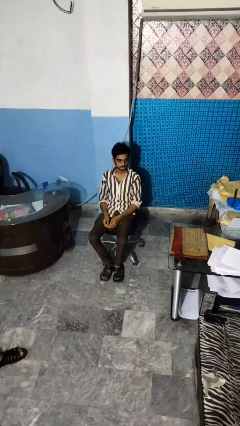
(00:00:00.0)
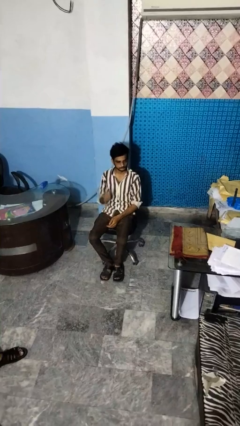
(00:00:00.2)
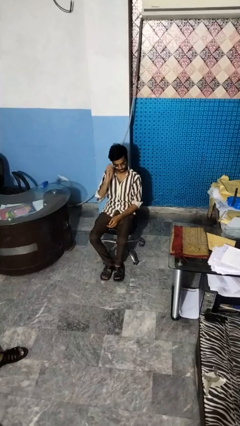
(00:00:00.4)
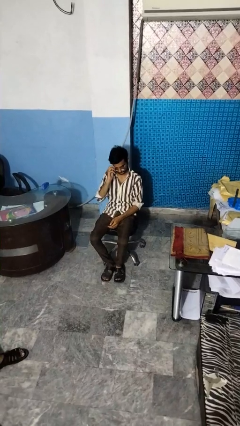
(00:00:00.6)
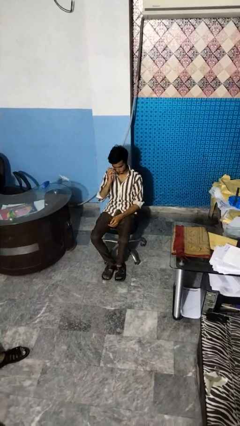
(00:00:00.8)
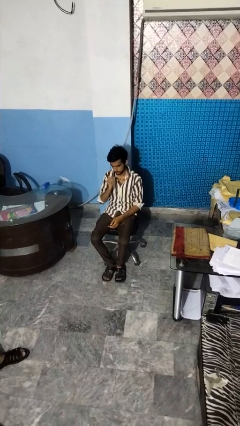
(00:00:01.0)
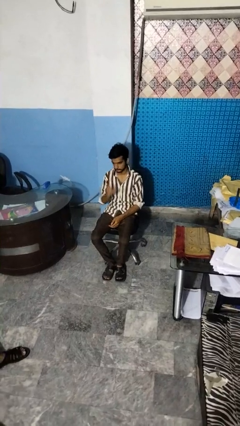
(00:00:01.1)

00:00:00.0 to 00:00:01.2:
person takes off glasses

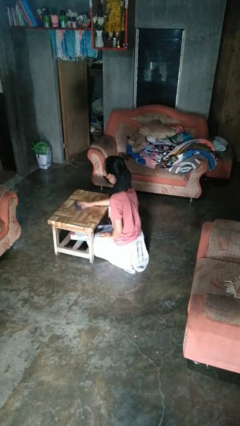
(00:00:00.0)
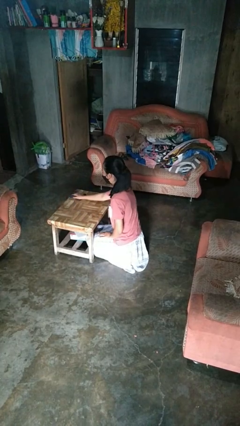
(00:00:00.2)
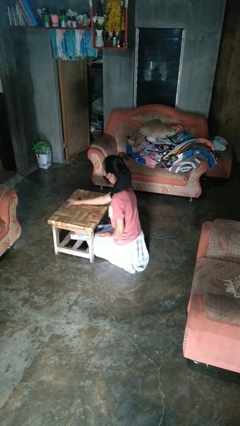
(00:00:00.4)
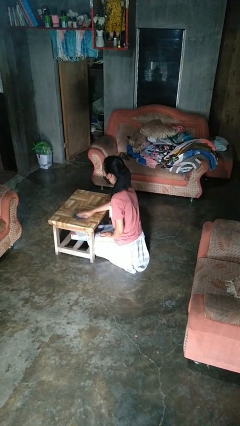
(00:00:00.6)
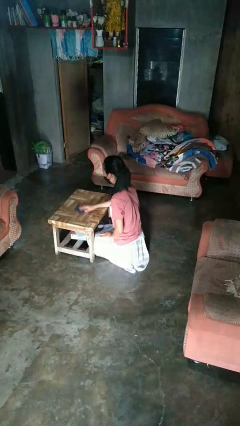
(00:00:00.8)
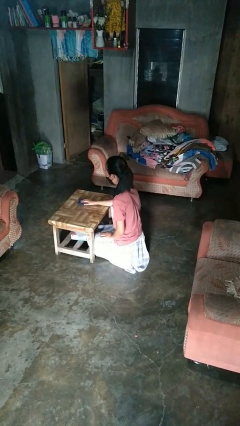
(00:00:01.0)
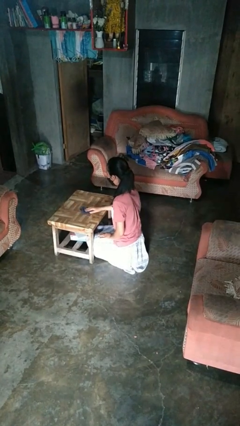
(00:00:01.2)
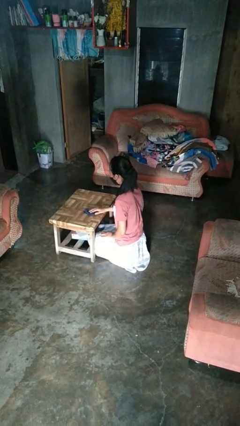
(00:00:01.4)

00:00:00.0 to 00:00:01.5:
person cleans table with rag

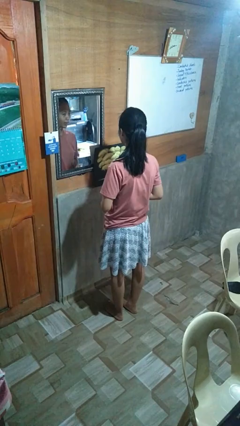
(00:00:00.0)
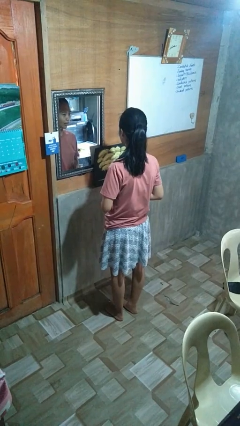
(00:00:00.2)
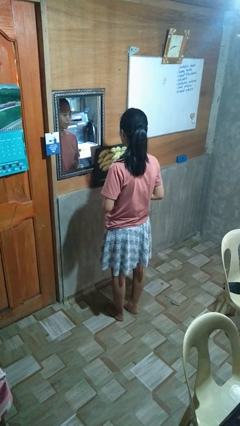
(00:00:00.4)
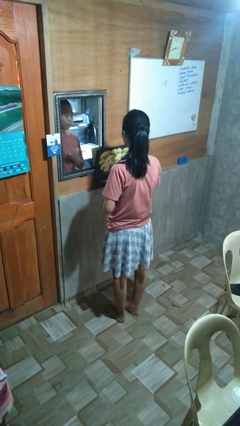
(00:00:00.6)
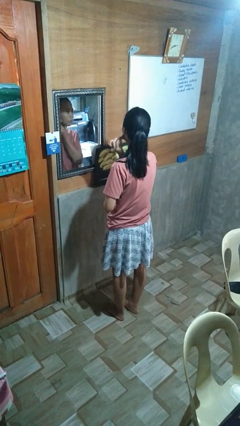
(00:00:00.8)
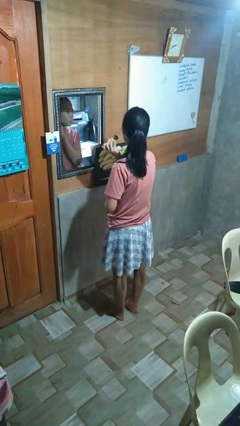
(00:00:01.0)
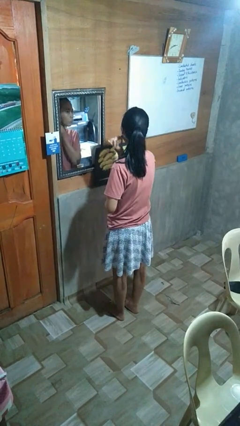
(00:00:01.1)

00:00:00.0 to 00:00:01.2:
person applies foundation makeup

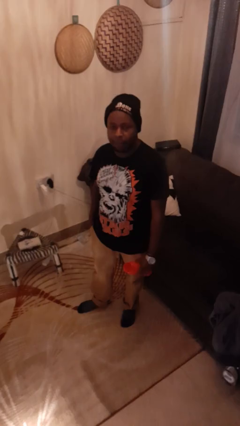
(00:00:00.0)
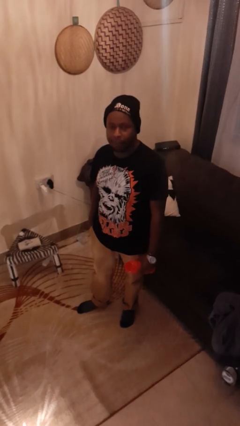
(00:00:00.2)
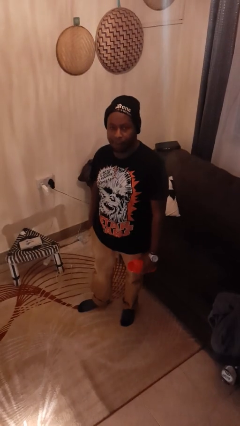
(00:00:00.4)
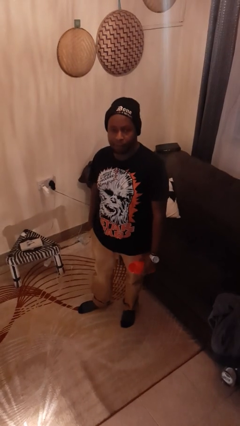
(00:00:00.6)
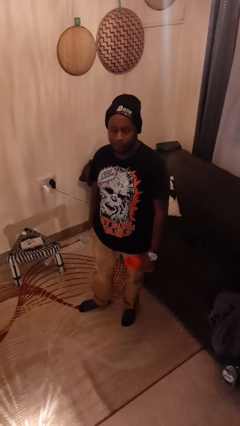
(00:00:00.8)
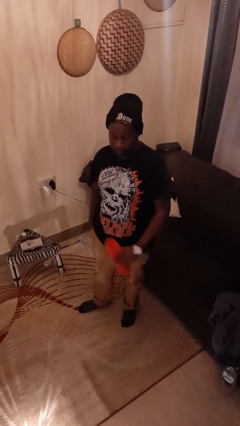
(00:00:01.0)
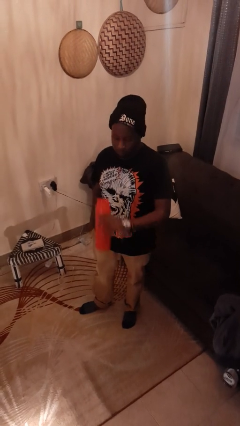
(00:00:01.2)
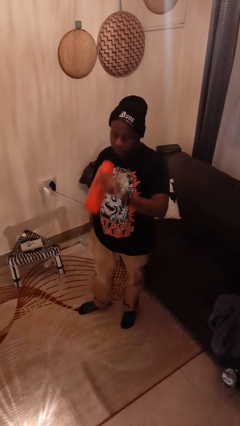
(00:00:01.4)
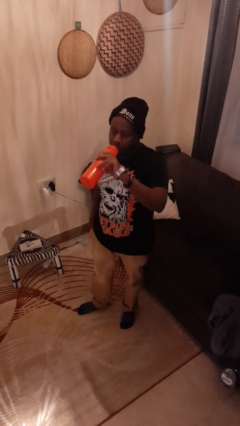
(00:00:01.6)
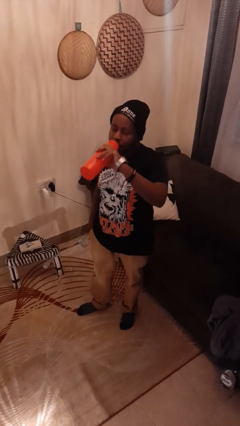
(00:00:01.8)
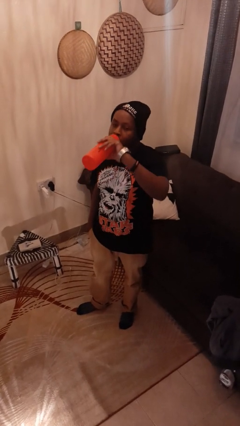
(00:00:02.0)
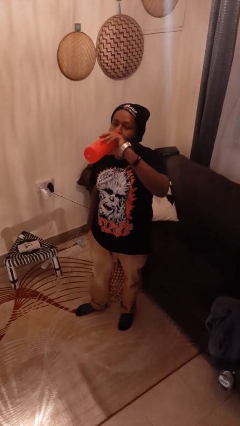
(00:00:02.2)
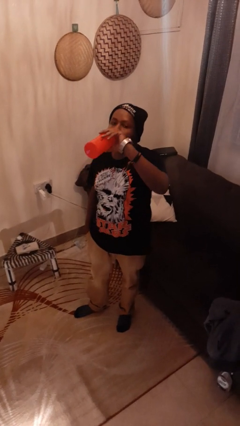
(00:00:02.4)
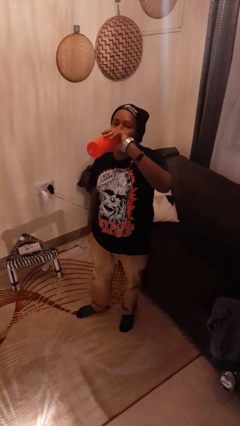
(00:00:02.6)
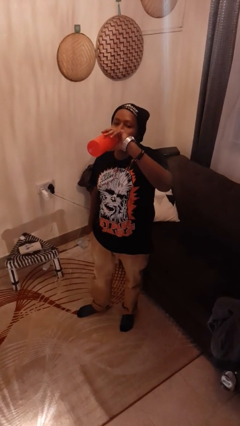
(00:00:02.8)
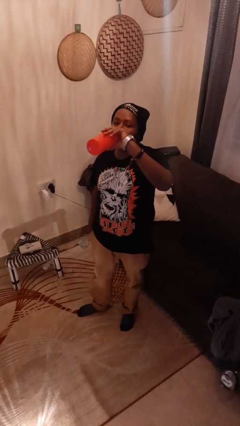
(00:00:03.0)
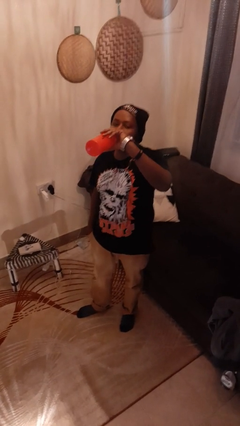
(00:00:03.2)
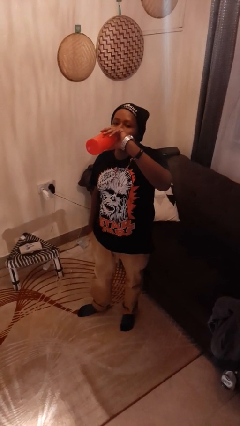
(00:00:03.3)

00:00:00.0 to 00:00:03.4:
person drinks from bottle

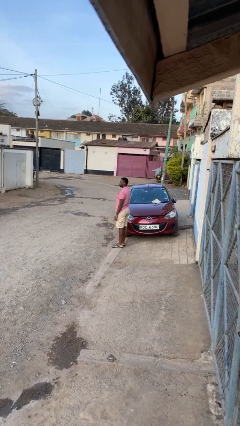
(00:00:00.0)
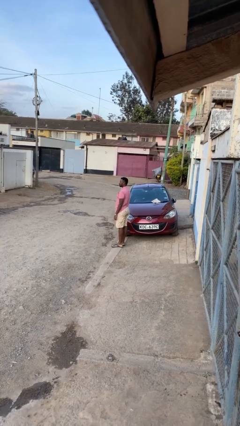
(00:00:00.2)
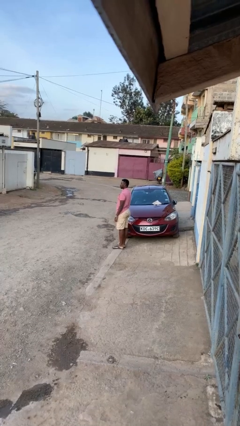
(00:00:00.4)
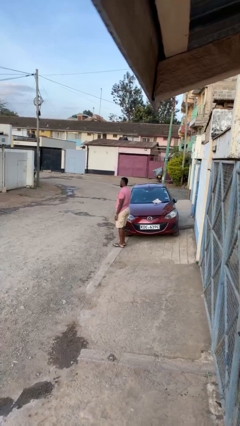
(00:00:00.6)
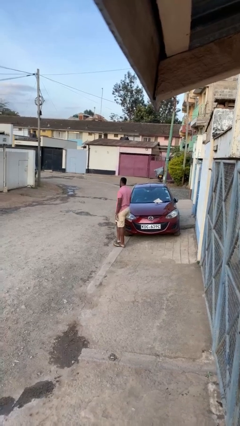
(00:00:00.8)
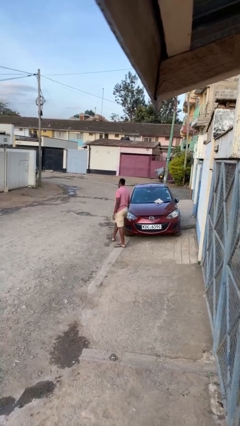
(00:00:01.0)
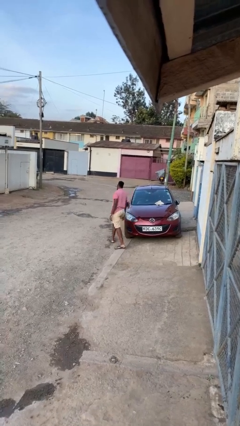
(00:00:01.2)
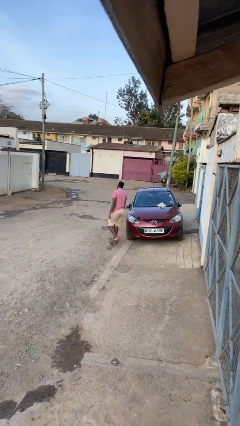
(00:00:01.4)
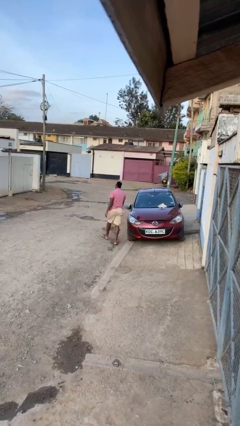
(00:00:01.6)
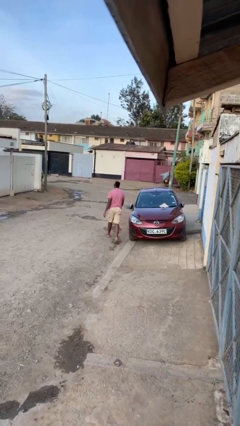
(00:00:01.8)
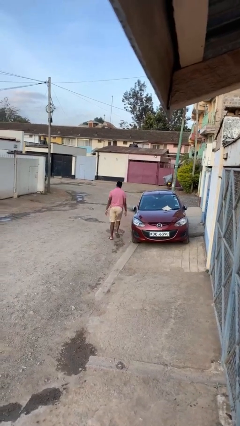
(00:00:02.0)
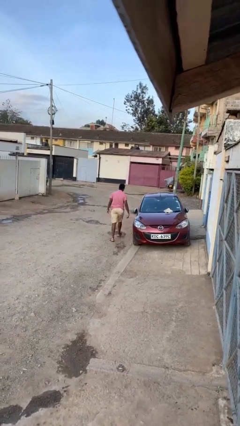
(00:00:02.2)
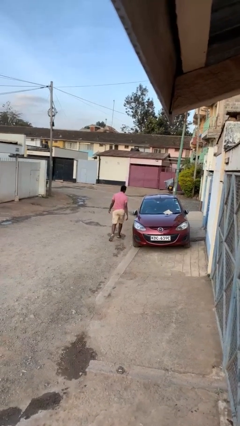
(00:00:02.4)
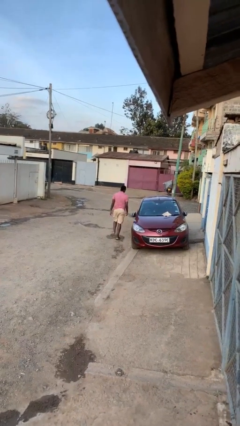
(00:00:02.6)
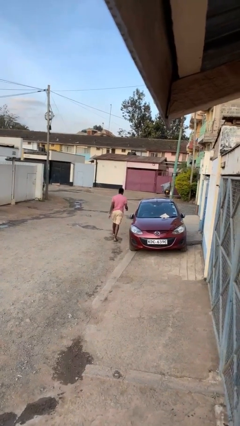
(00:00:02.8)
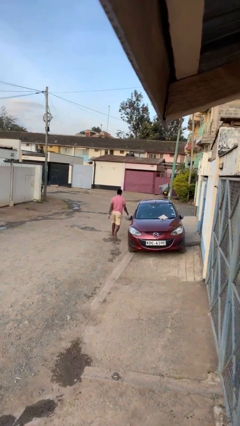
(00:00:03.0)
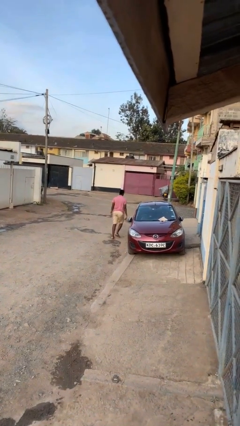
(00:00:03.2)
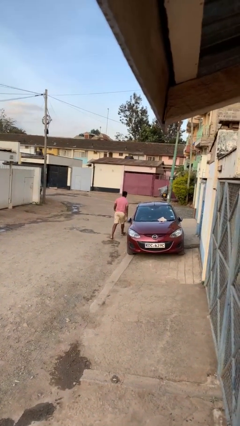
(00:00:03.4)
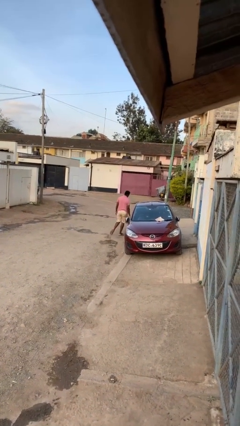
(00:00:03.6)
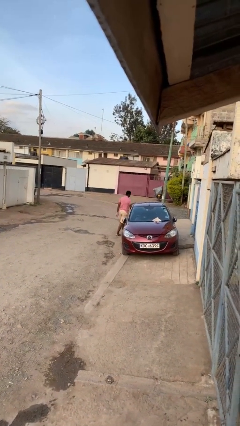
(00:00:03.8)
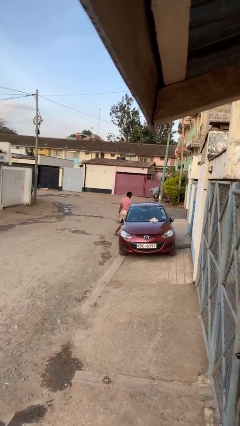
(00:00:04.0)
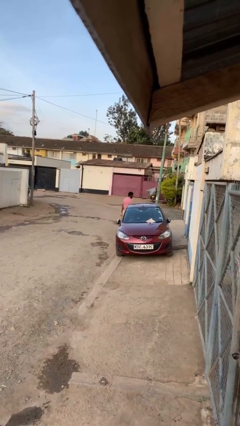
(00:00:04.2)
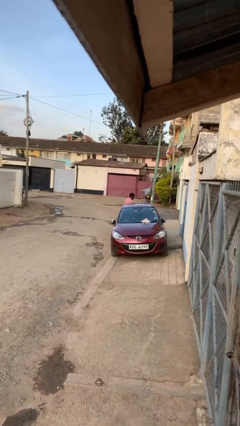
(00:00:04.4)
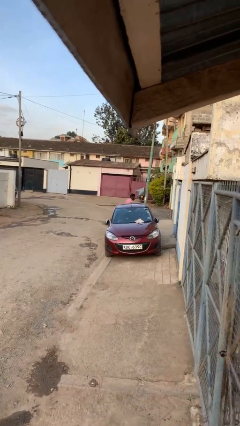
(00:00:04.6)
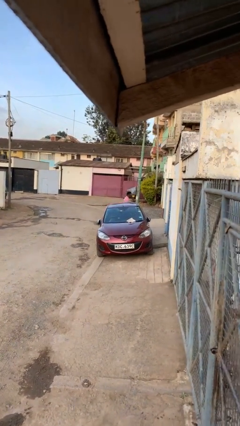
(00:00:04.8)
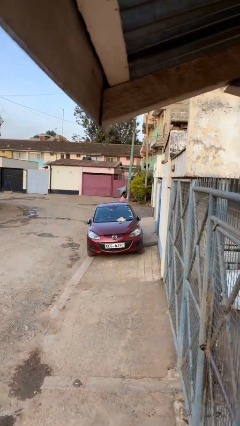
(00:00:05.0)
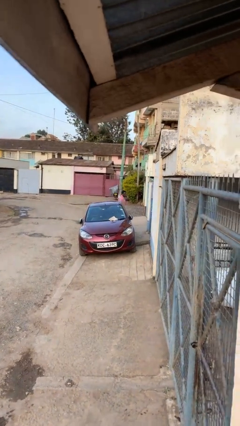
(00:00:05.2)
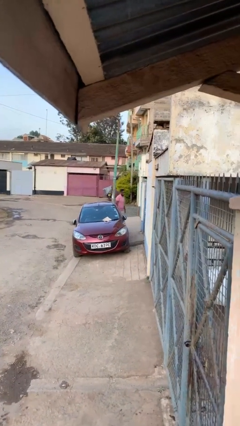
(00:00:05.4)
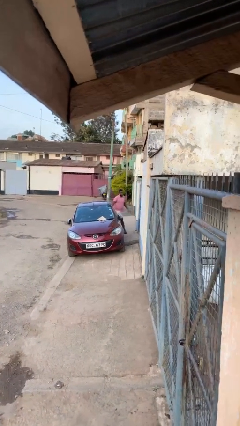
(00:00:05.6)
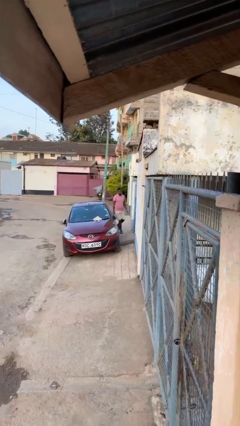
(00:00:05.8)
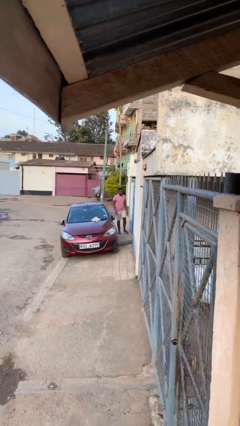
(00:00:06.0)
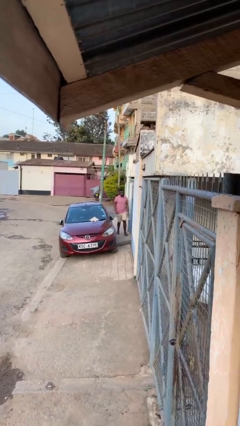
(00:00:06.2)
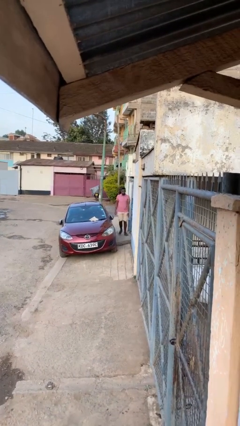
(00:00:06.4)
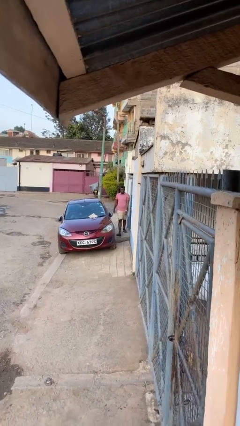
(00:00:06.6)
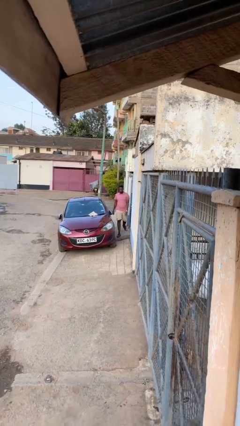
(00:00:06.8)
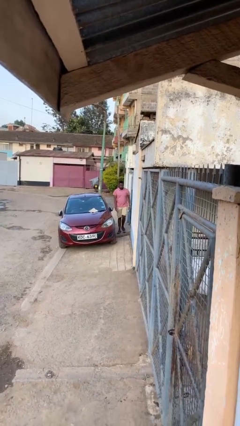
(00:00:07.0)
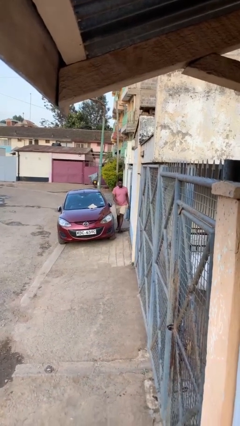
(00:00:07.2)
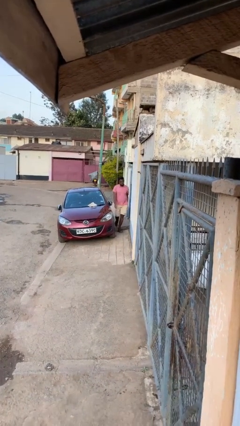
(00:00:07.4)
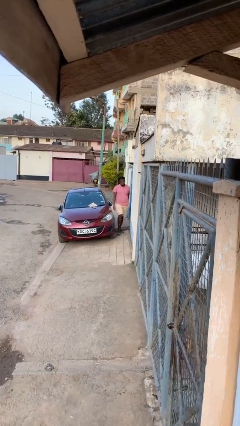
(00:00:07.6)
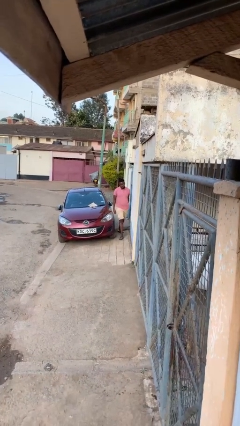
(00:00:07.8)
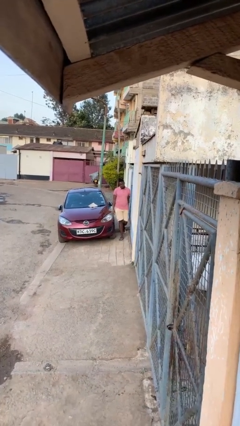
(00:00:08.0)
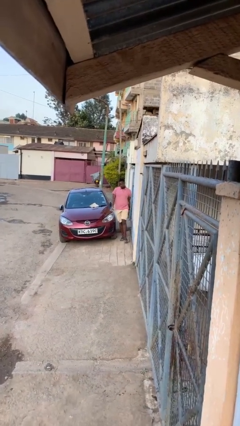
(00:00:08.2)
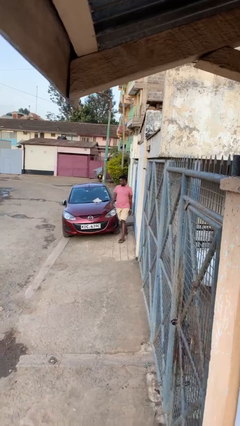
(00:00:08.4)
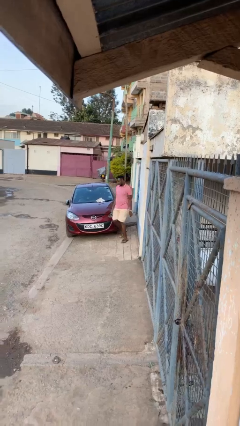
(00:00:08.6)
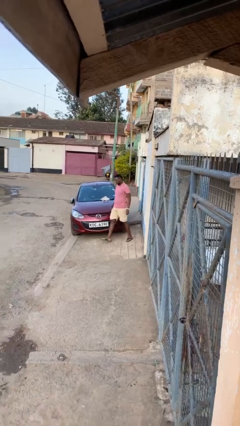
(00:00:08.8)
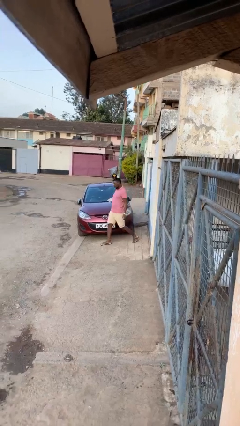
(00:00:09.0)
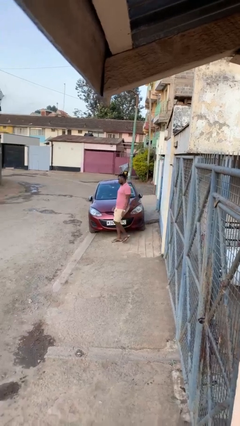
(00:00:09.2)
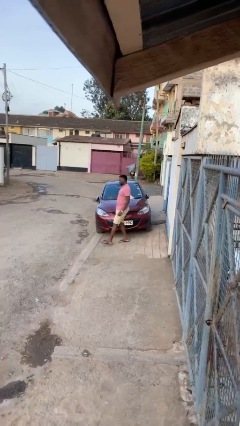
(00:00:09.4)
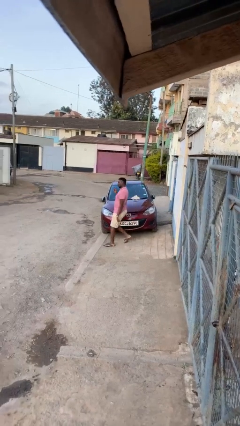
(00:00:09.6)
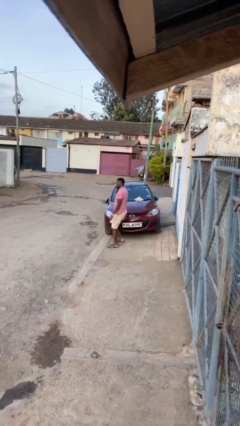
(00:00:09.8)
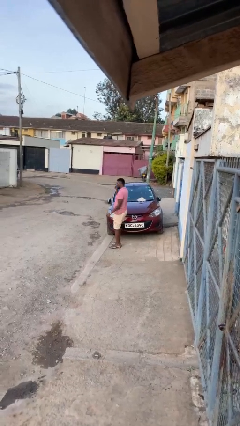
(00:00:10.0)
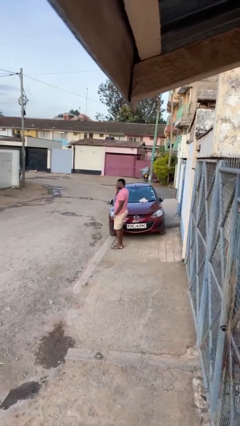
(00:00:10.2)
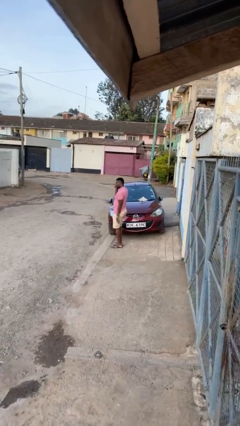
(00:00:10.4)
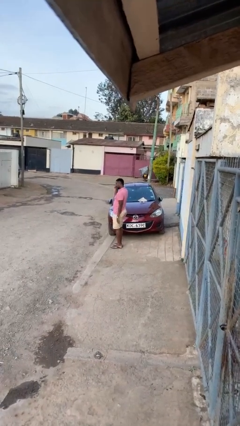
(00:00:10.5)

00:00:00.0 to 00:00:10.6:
person walks around car
